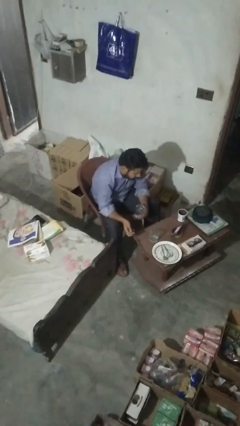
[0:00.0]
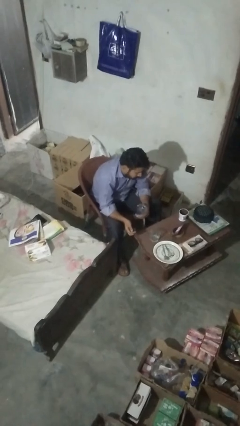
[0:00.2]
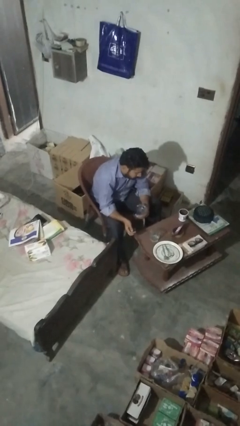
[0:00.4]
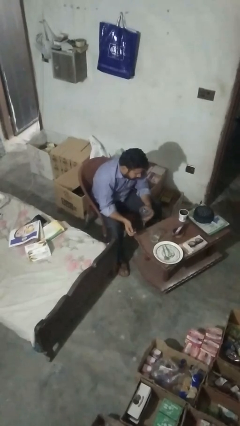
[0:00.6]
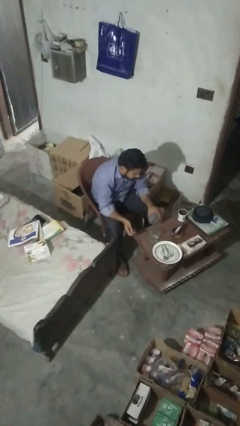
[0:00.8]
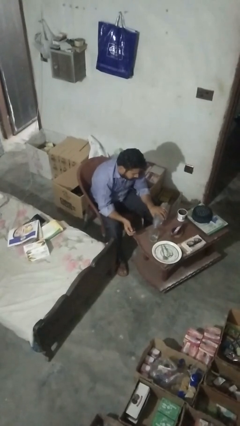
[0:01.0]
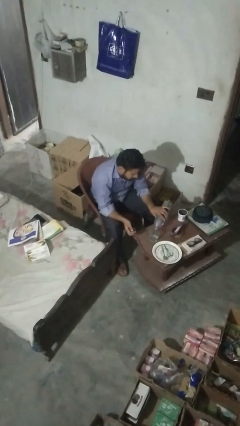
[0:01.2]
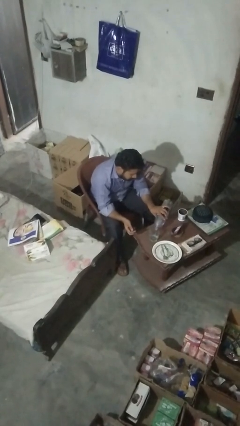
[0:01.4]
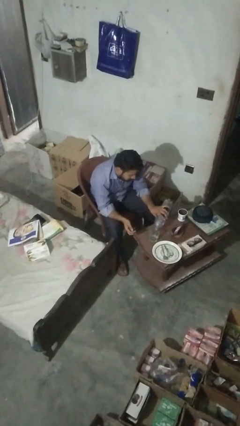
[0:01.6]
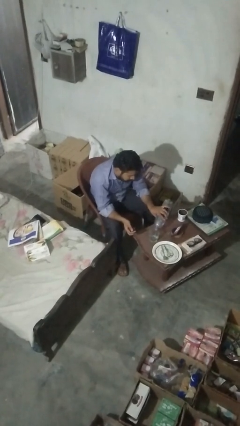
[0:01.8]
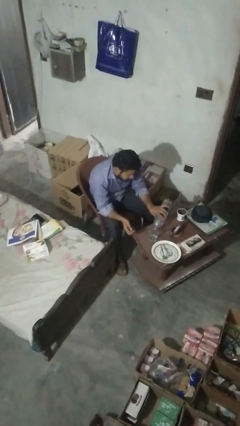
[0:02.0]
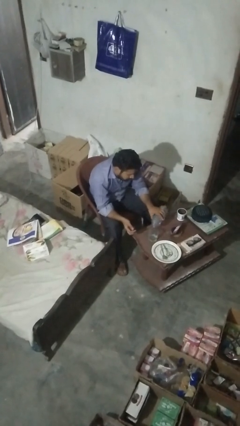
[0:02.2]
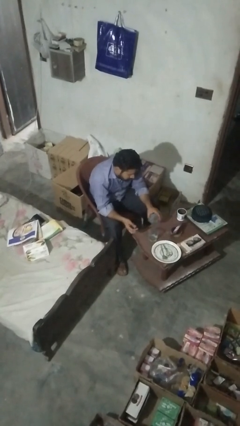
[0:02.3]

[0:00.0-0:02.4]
person pours liquid into cup

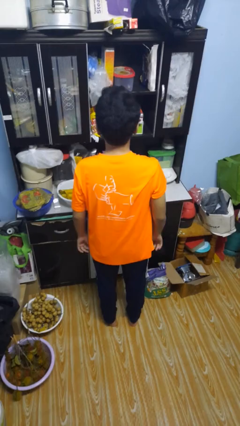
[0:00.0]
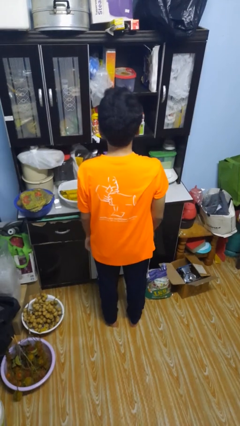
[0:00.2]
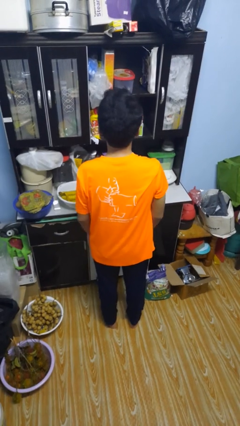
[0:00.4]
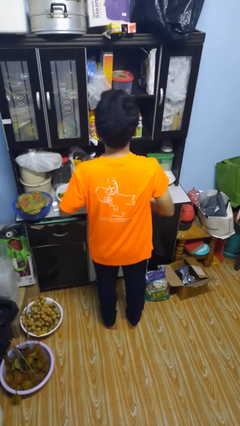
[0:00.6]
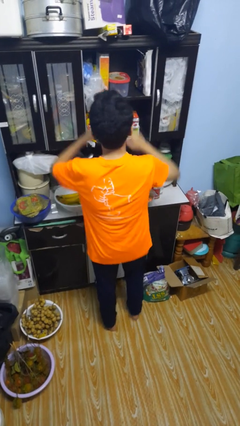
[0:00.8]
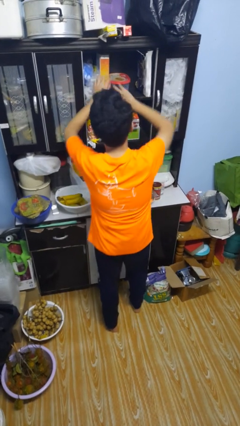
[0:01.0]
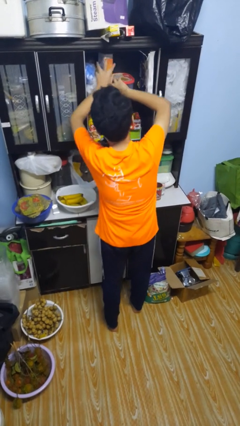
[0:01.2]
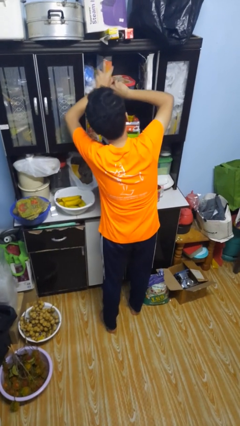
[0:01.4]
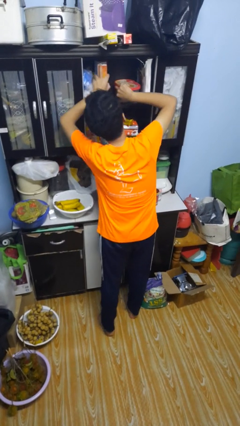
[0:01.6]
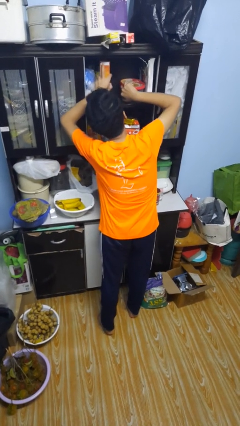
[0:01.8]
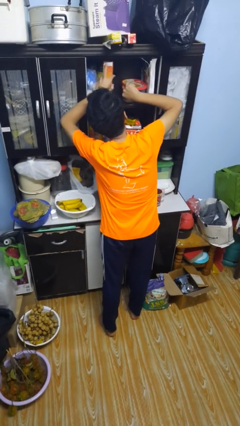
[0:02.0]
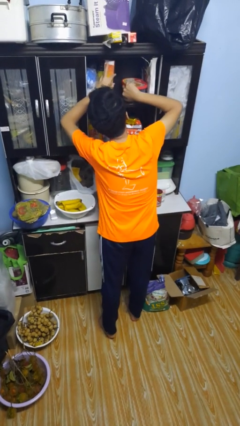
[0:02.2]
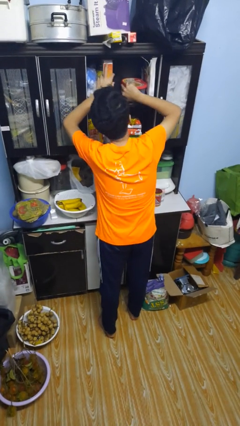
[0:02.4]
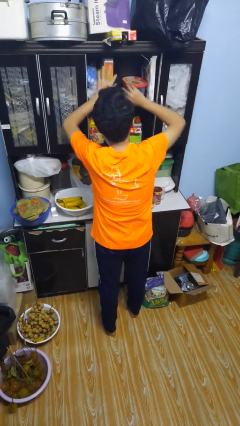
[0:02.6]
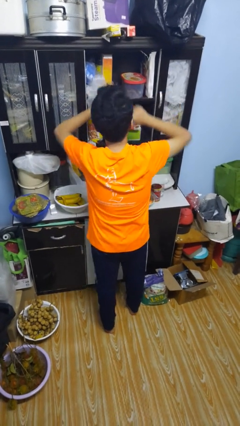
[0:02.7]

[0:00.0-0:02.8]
person searches in cabinet

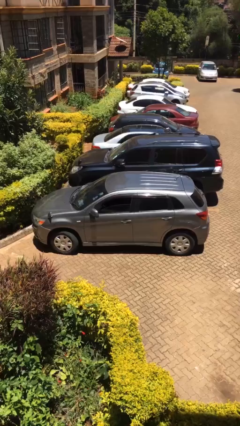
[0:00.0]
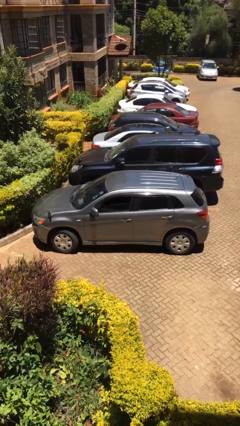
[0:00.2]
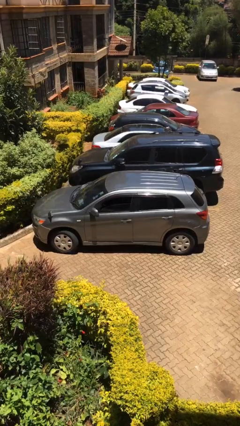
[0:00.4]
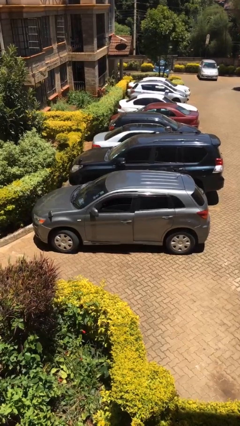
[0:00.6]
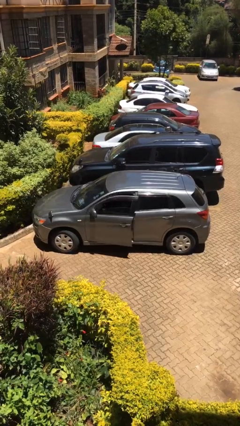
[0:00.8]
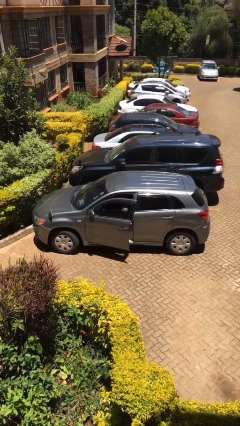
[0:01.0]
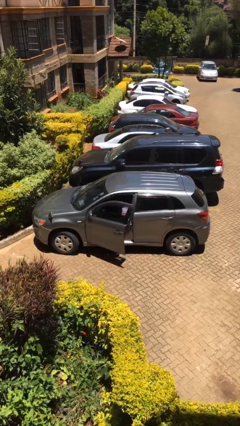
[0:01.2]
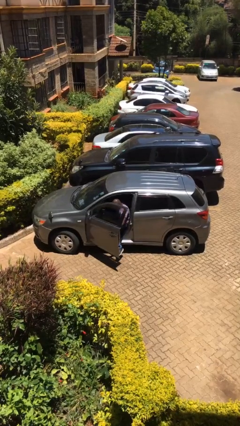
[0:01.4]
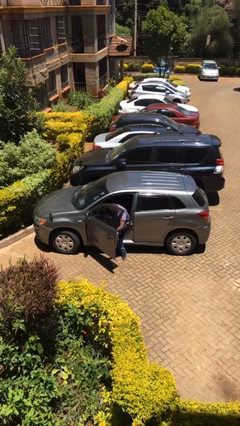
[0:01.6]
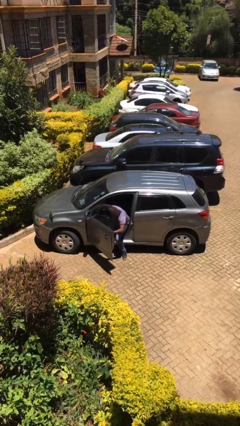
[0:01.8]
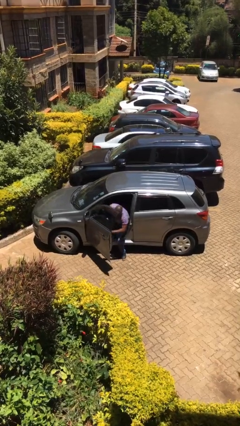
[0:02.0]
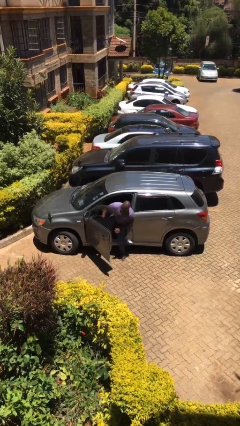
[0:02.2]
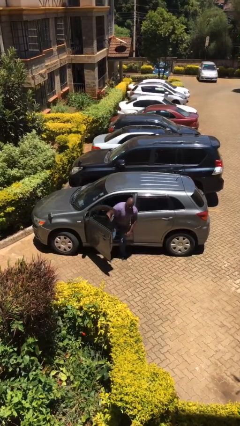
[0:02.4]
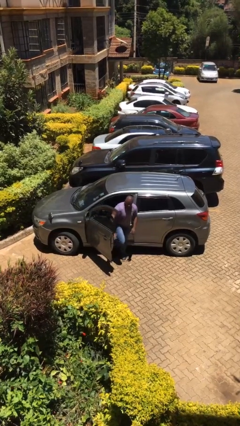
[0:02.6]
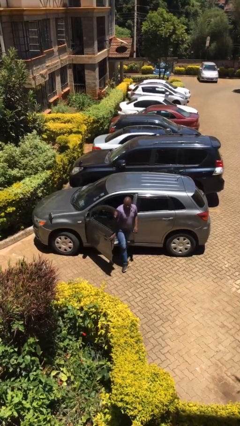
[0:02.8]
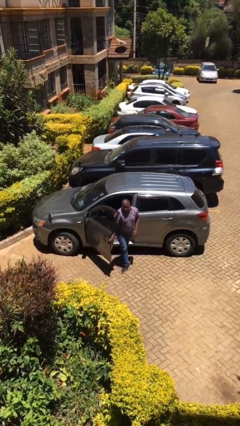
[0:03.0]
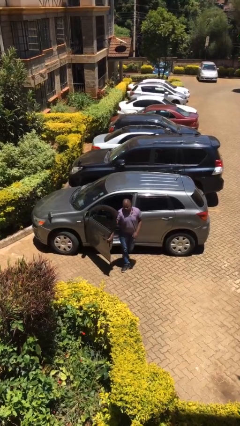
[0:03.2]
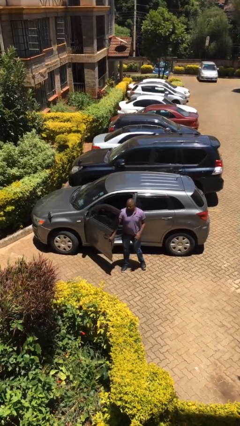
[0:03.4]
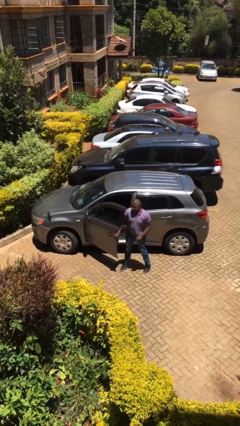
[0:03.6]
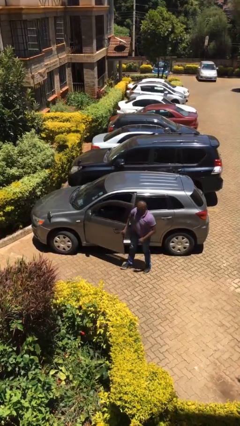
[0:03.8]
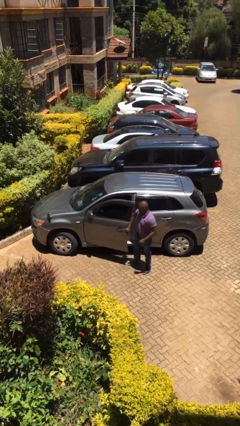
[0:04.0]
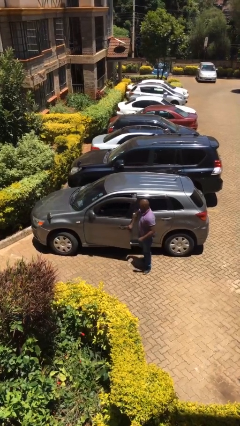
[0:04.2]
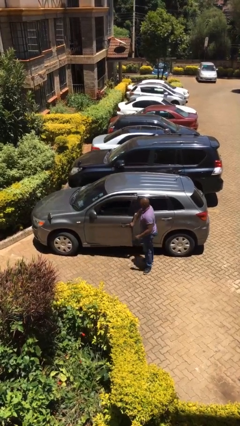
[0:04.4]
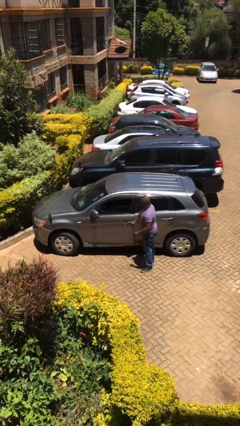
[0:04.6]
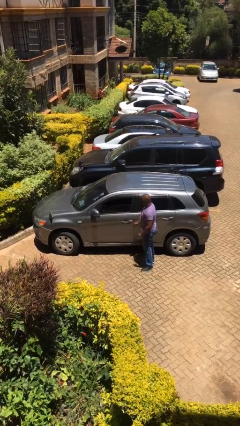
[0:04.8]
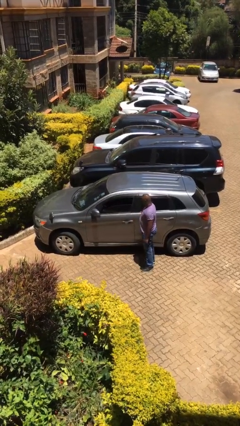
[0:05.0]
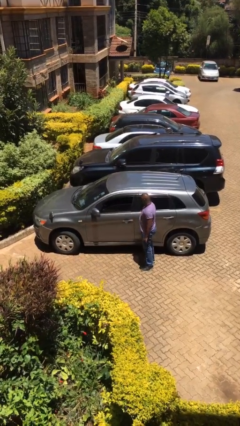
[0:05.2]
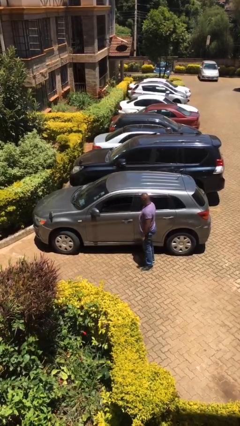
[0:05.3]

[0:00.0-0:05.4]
car drops off person

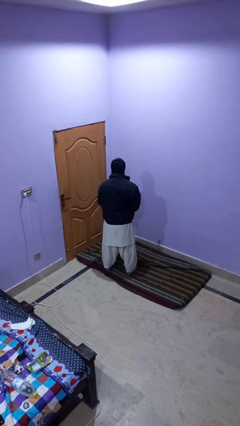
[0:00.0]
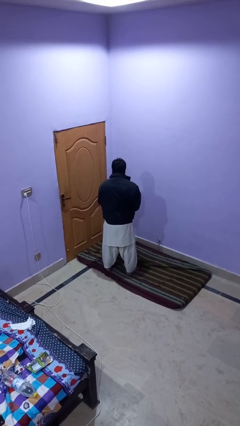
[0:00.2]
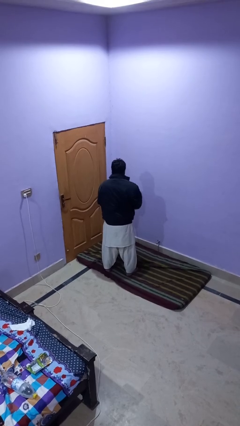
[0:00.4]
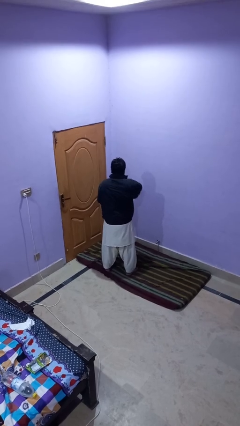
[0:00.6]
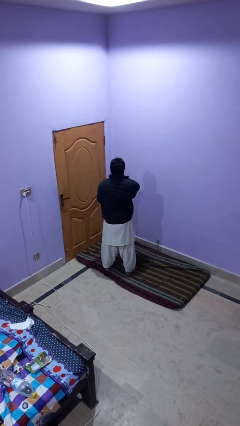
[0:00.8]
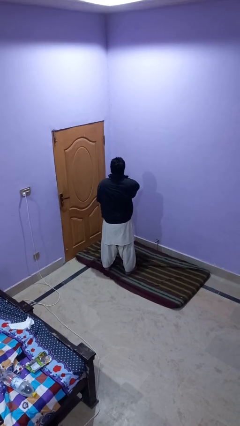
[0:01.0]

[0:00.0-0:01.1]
person zips up jacket

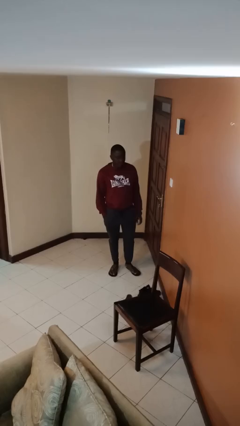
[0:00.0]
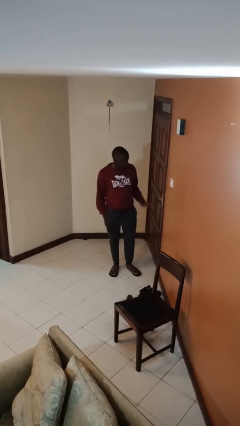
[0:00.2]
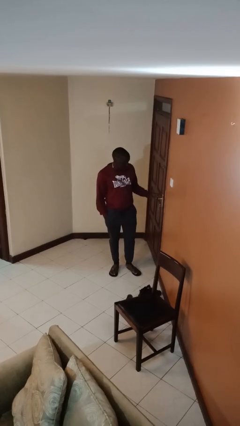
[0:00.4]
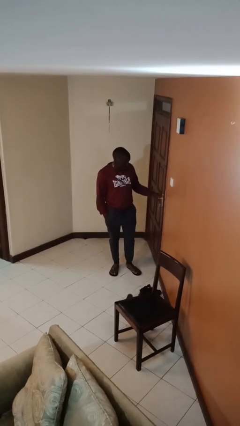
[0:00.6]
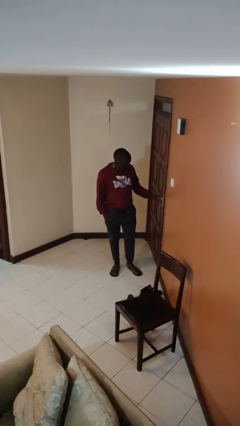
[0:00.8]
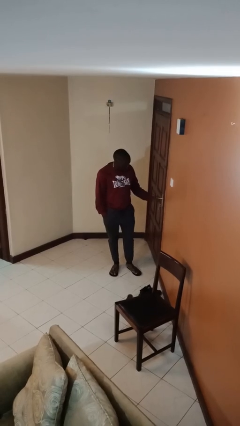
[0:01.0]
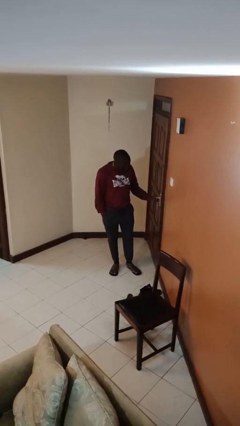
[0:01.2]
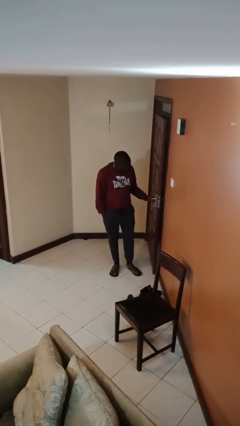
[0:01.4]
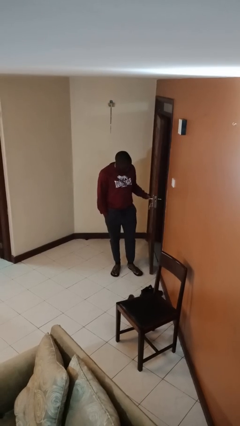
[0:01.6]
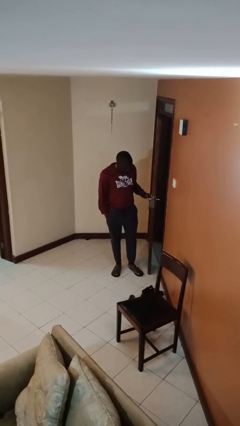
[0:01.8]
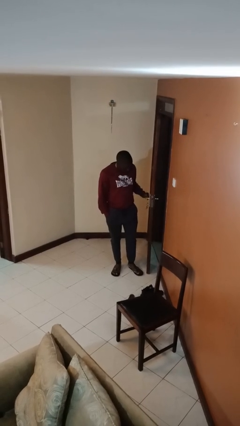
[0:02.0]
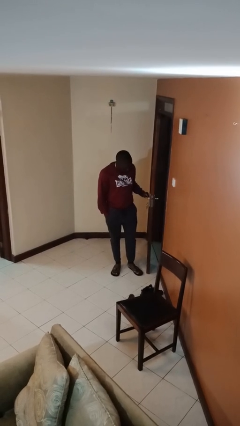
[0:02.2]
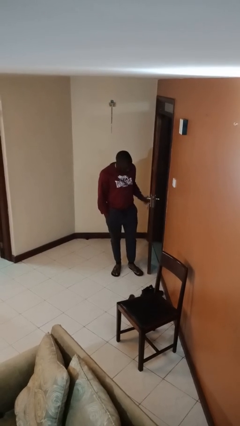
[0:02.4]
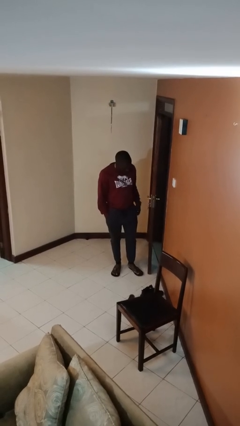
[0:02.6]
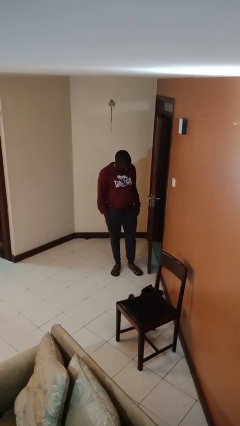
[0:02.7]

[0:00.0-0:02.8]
person opens facility door

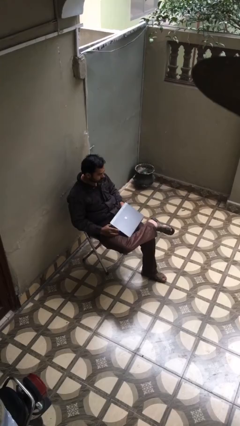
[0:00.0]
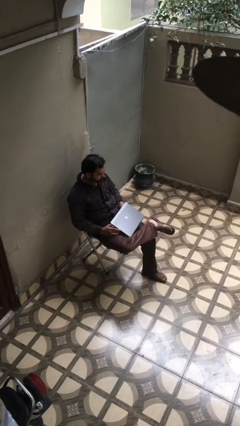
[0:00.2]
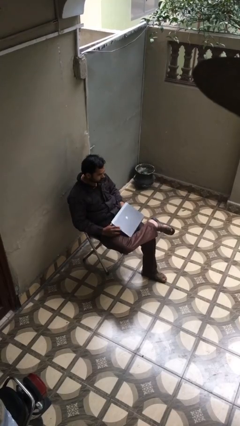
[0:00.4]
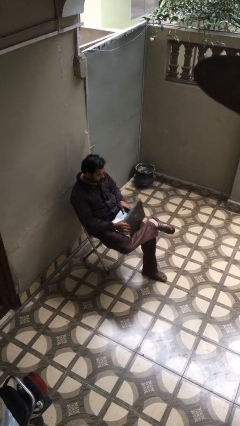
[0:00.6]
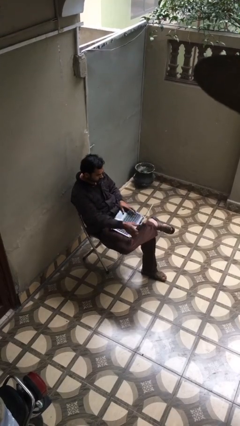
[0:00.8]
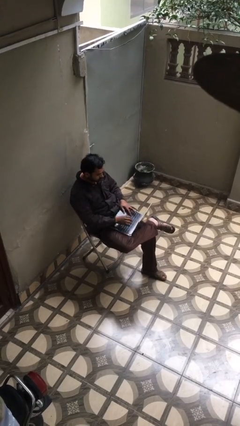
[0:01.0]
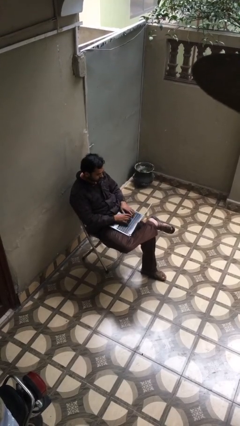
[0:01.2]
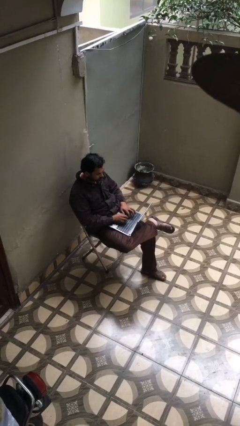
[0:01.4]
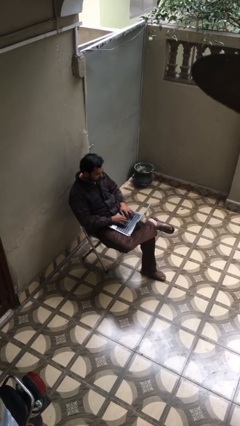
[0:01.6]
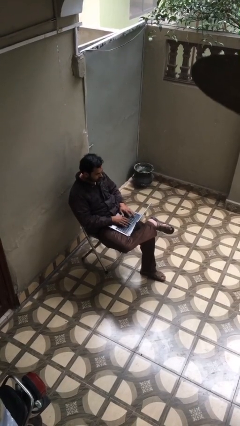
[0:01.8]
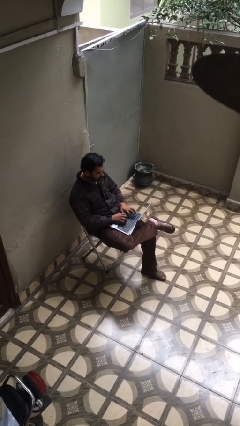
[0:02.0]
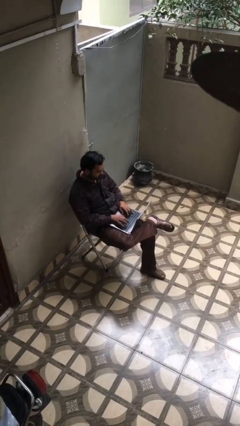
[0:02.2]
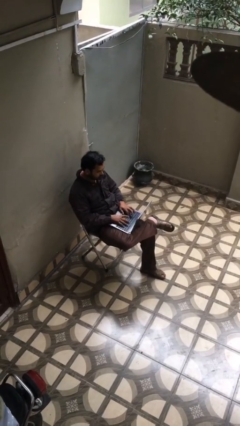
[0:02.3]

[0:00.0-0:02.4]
person interacts with laptop

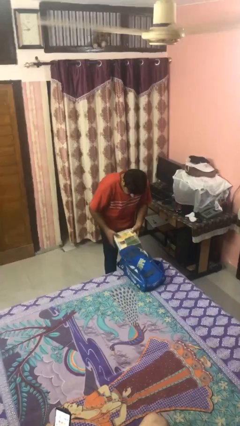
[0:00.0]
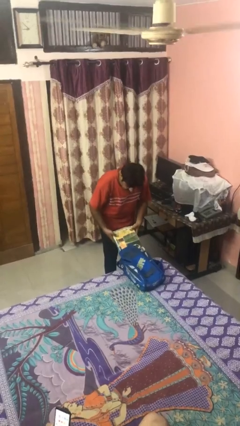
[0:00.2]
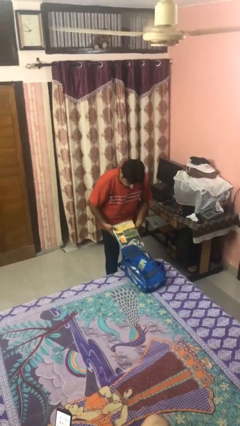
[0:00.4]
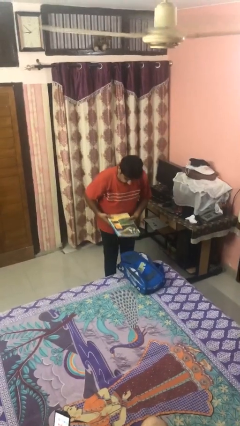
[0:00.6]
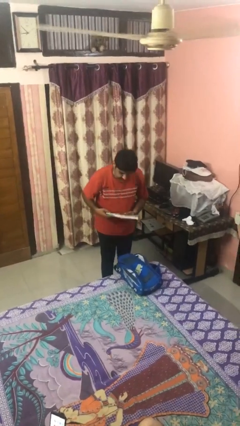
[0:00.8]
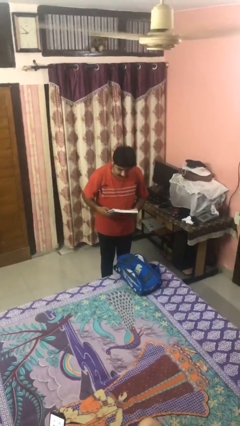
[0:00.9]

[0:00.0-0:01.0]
person takes object from backpack
